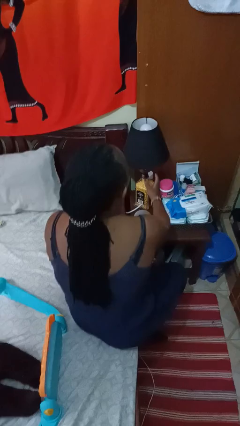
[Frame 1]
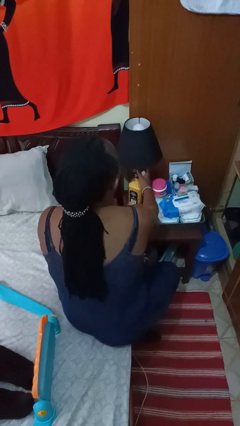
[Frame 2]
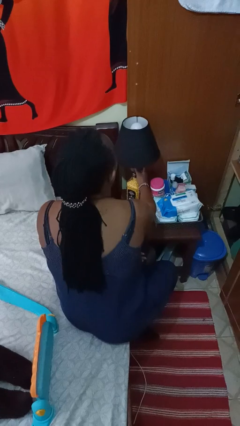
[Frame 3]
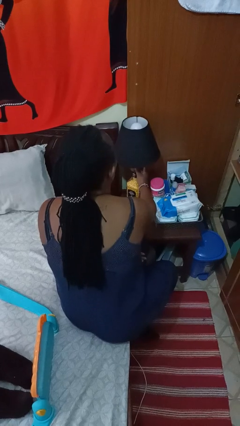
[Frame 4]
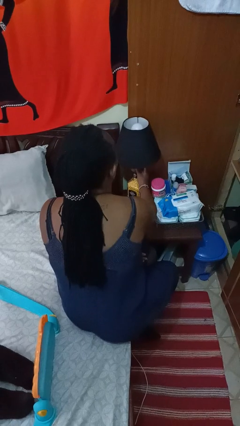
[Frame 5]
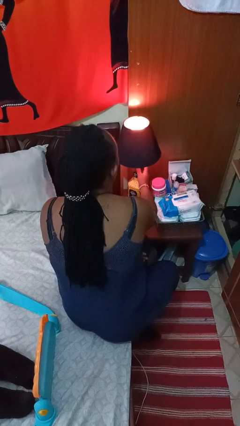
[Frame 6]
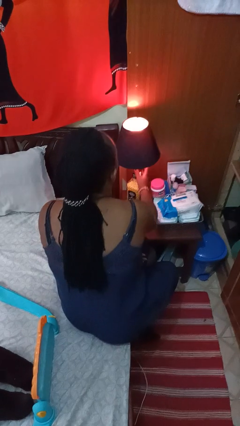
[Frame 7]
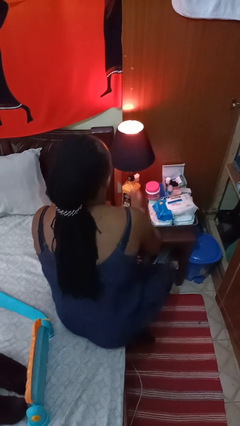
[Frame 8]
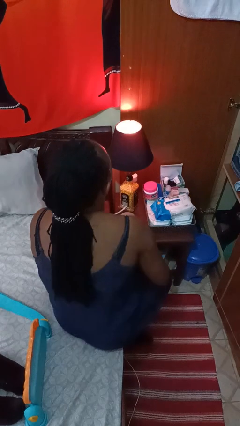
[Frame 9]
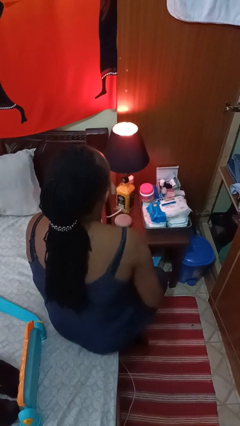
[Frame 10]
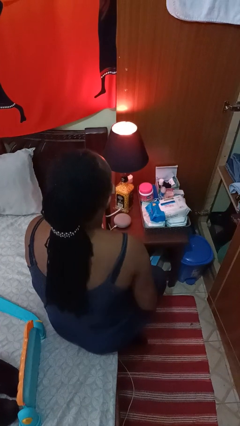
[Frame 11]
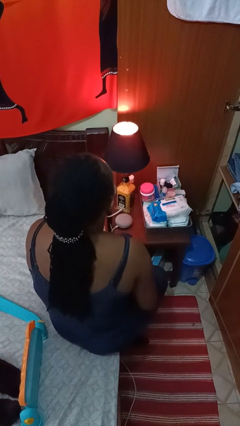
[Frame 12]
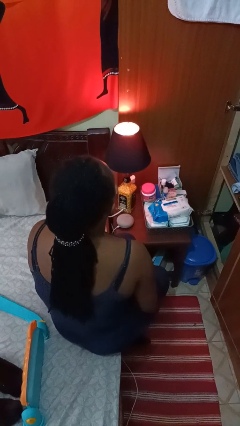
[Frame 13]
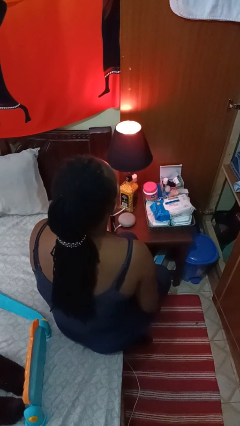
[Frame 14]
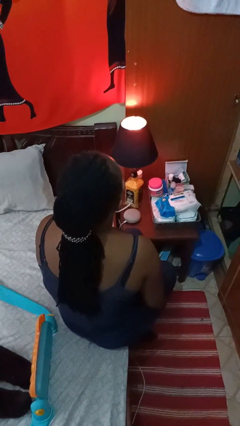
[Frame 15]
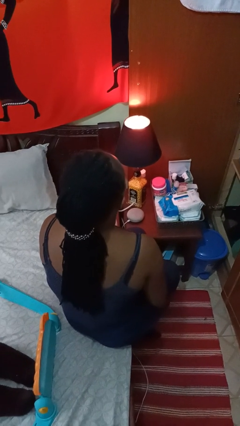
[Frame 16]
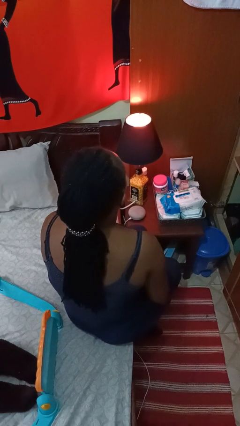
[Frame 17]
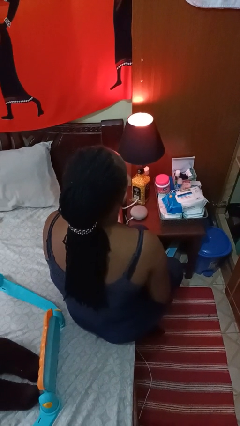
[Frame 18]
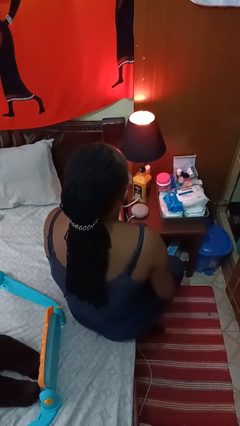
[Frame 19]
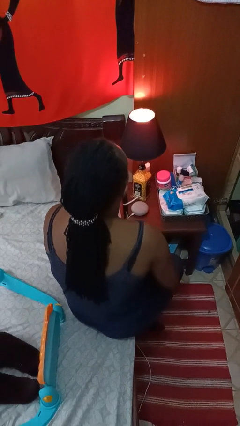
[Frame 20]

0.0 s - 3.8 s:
person turns on lamp

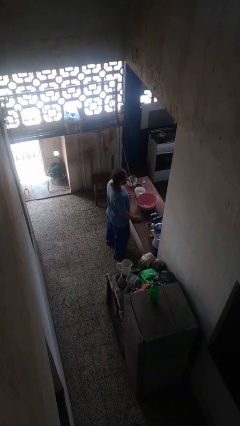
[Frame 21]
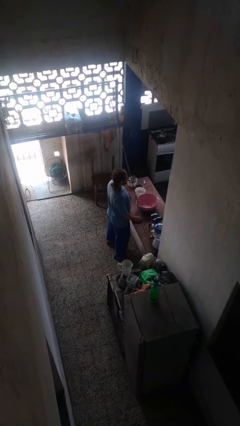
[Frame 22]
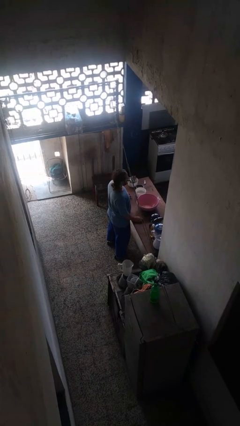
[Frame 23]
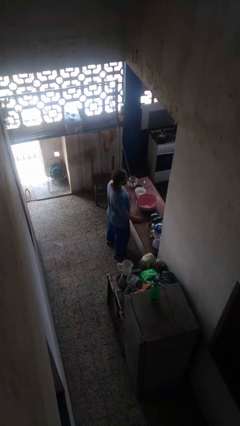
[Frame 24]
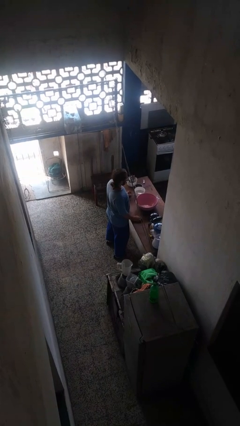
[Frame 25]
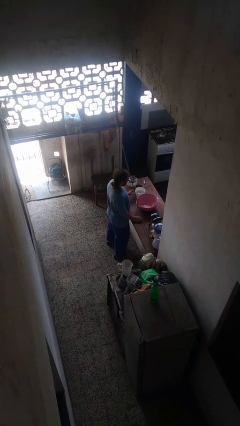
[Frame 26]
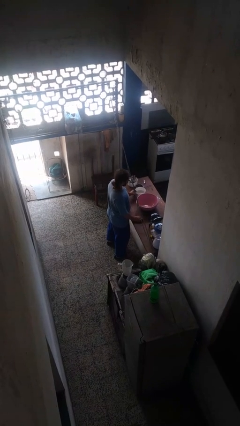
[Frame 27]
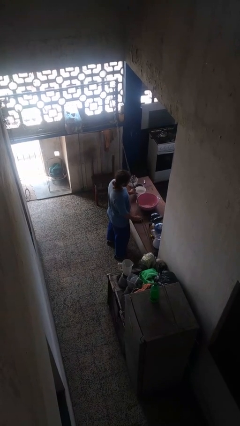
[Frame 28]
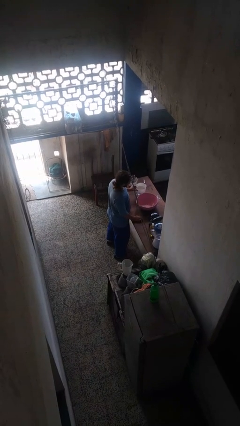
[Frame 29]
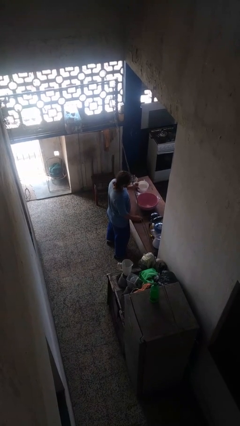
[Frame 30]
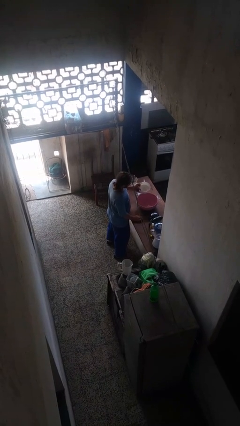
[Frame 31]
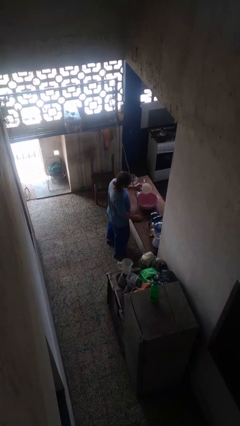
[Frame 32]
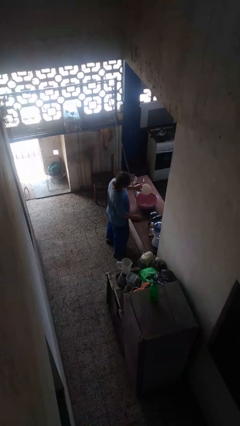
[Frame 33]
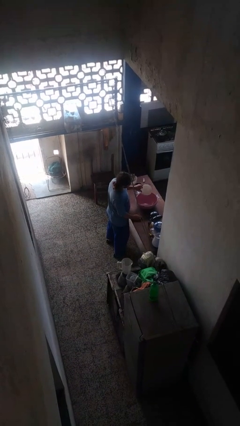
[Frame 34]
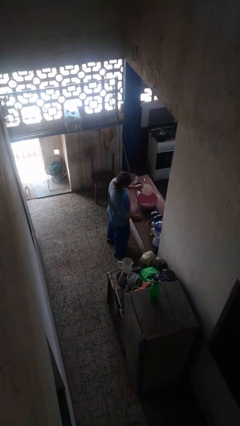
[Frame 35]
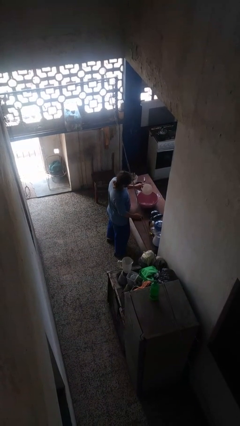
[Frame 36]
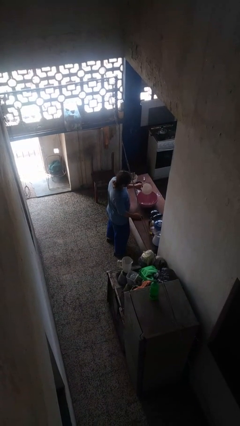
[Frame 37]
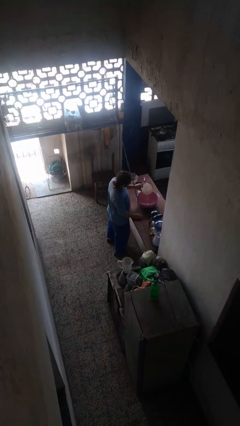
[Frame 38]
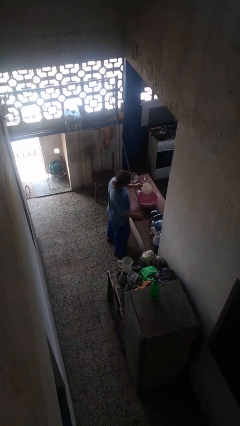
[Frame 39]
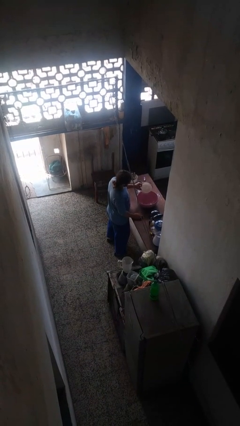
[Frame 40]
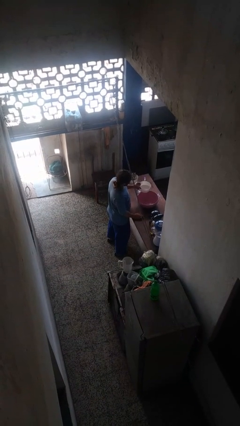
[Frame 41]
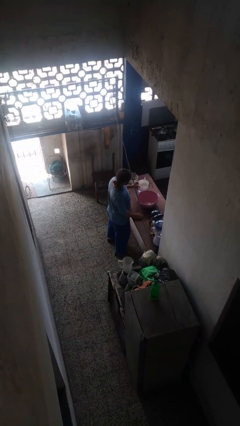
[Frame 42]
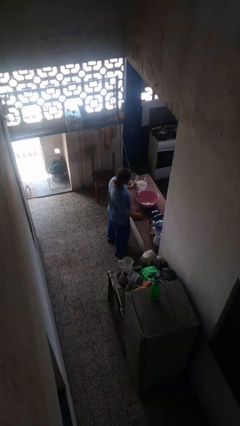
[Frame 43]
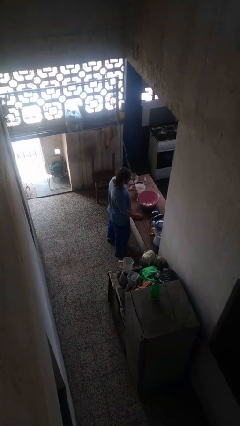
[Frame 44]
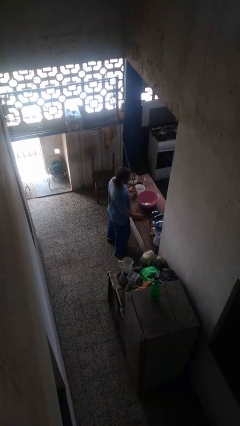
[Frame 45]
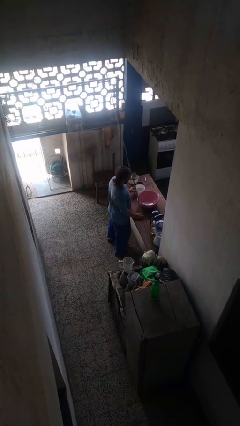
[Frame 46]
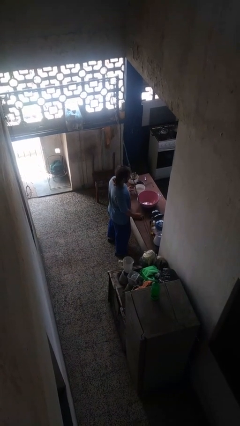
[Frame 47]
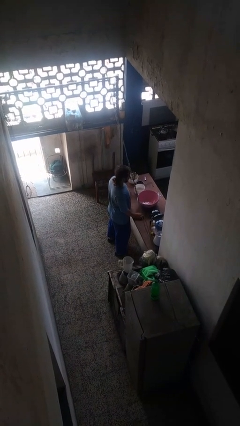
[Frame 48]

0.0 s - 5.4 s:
person pours into bowl

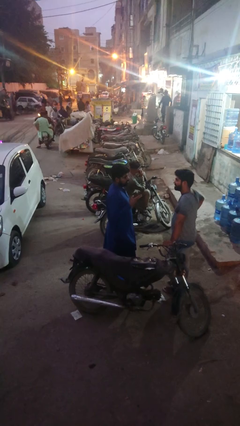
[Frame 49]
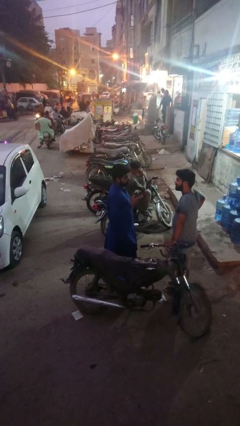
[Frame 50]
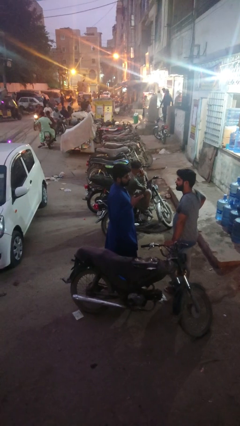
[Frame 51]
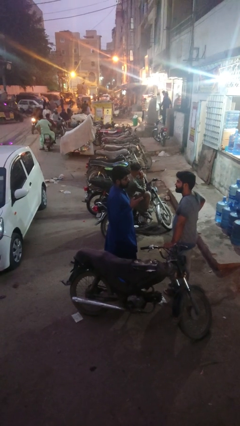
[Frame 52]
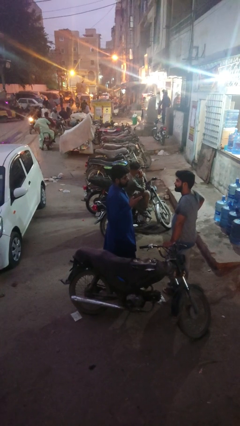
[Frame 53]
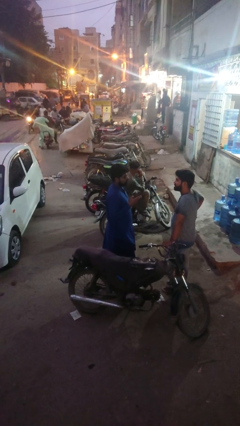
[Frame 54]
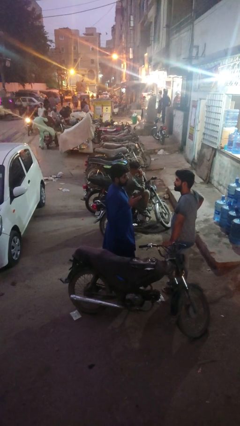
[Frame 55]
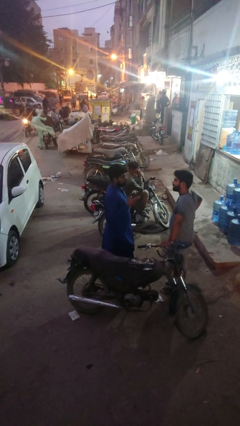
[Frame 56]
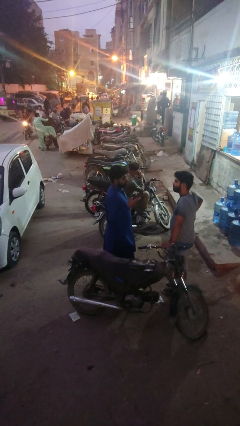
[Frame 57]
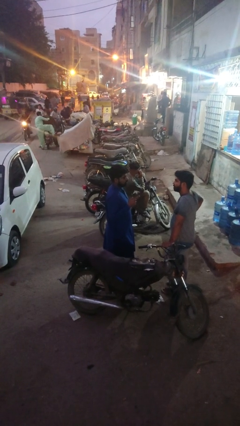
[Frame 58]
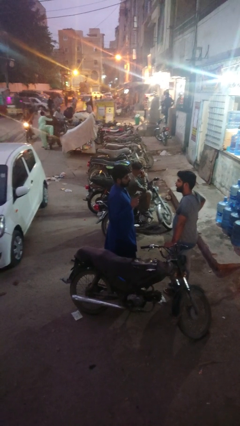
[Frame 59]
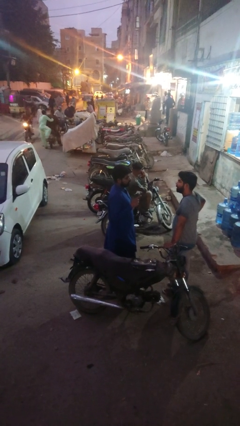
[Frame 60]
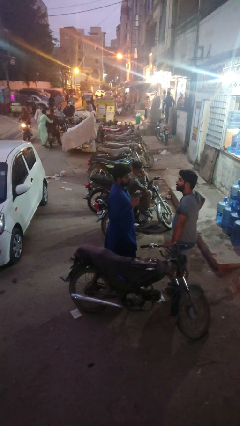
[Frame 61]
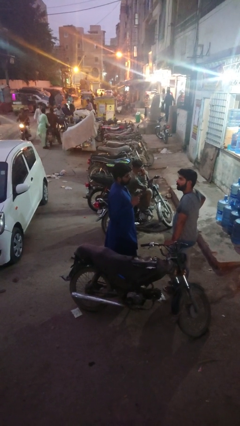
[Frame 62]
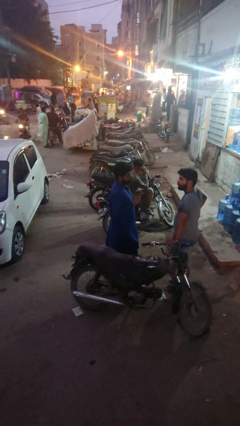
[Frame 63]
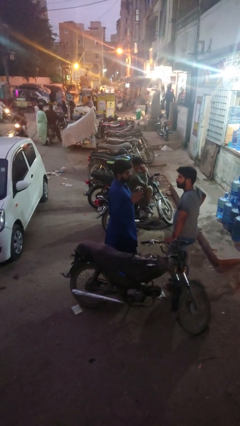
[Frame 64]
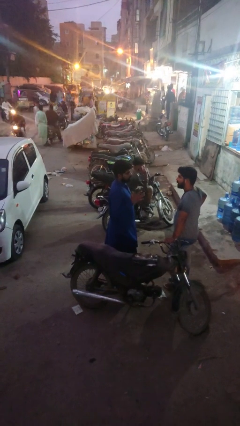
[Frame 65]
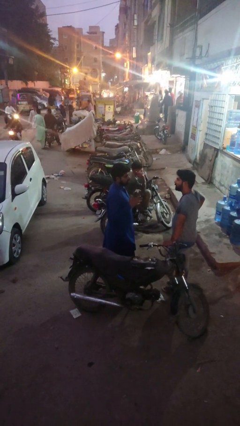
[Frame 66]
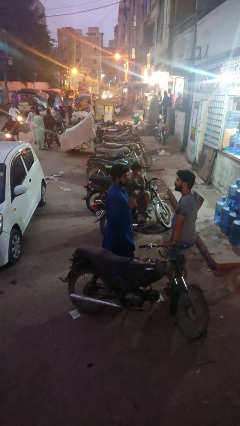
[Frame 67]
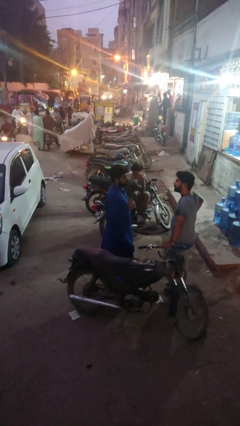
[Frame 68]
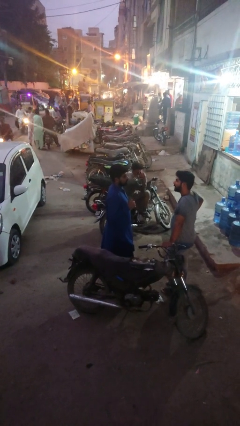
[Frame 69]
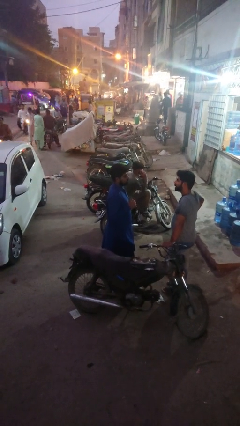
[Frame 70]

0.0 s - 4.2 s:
person talks to person

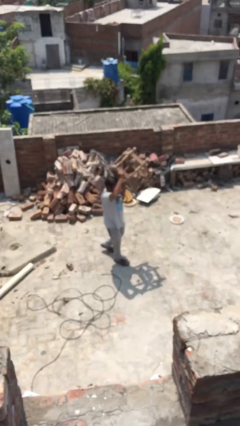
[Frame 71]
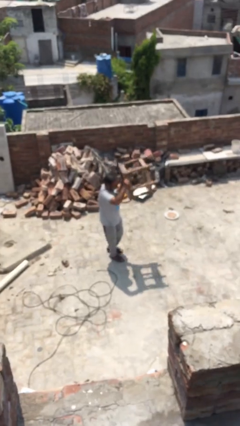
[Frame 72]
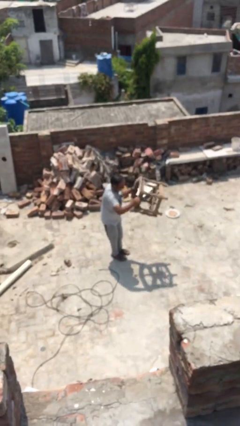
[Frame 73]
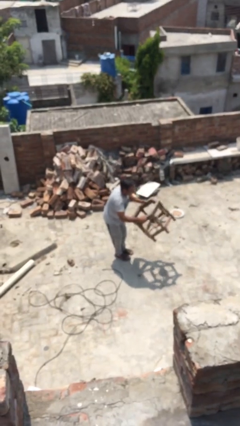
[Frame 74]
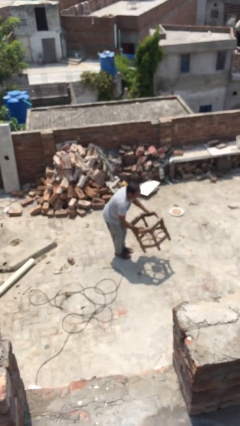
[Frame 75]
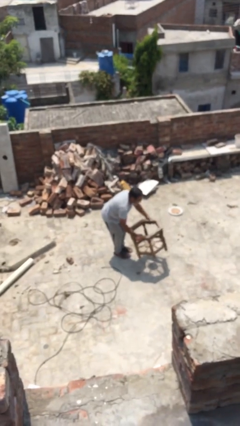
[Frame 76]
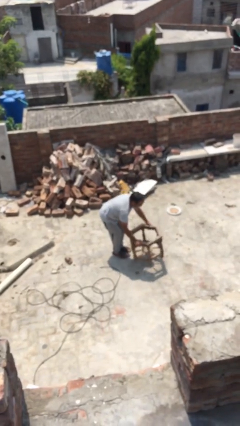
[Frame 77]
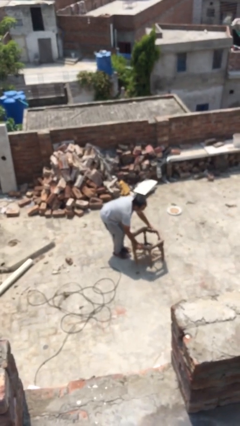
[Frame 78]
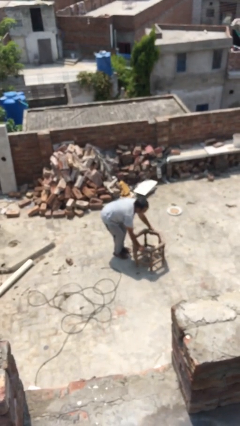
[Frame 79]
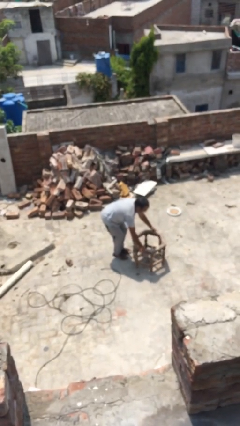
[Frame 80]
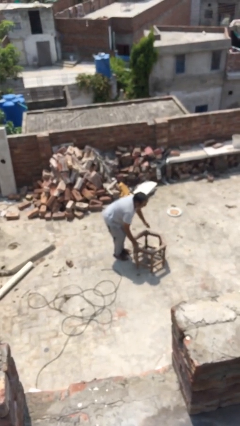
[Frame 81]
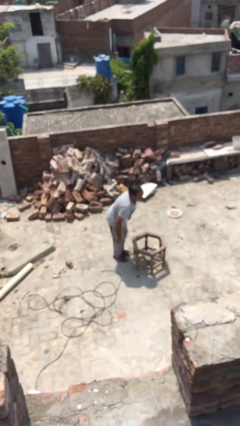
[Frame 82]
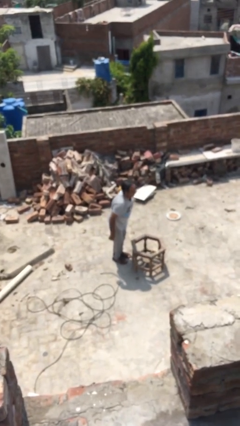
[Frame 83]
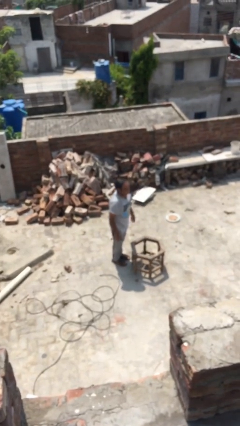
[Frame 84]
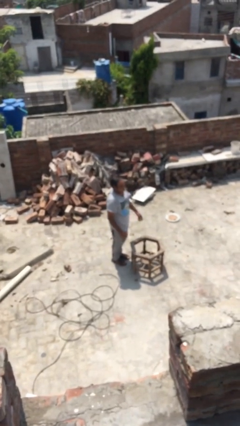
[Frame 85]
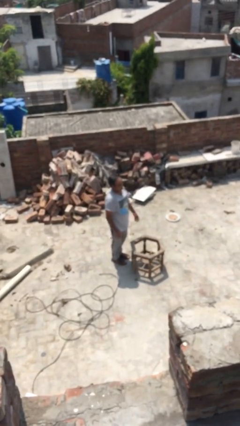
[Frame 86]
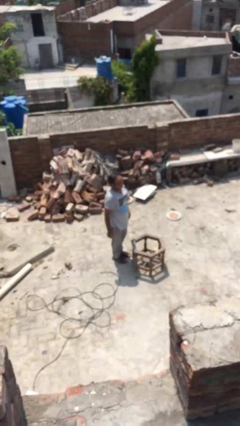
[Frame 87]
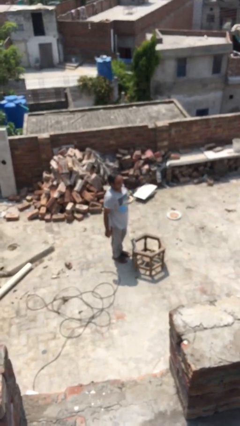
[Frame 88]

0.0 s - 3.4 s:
person puts down object on floor

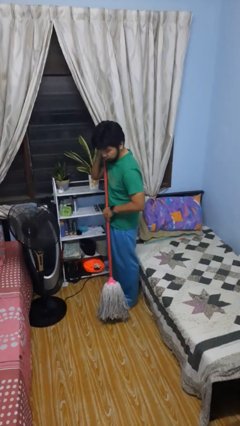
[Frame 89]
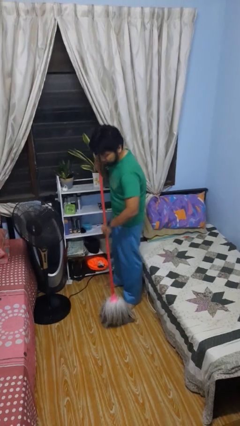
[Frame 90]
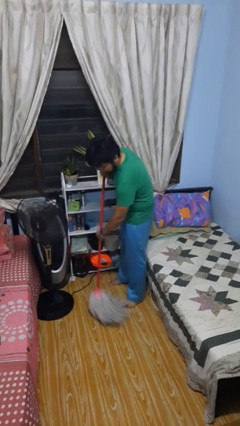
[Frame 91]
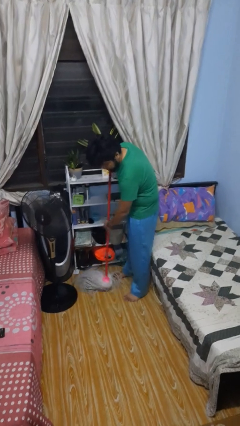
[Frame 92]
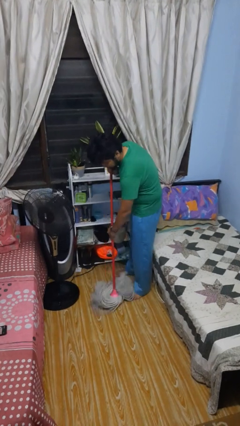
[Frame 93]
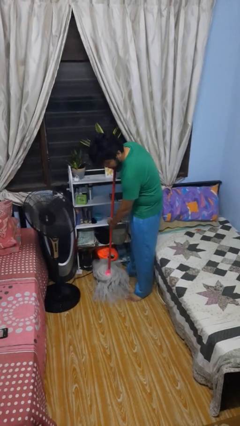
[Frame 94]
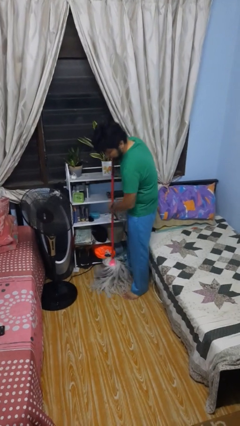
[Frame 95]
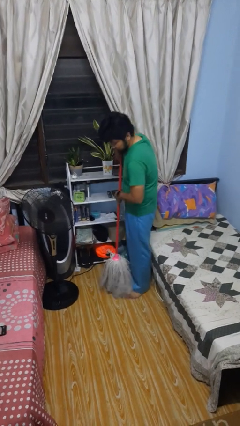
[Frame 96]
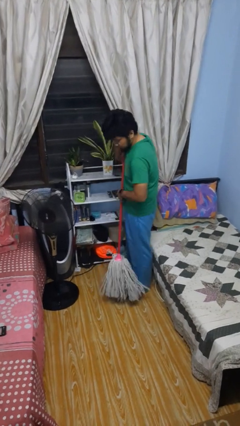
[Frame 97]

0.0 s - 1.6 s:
person mops
